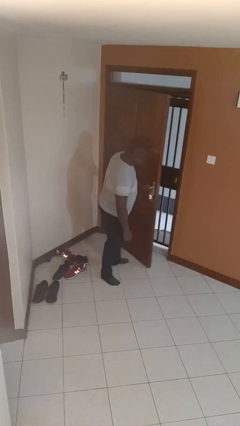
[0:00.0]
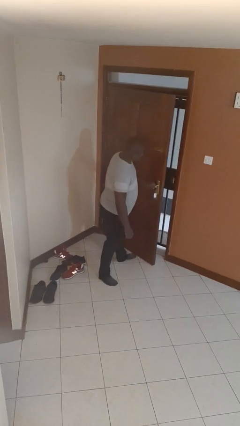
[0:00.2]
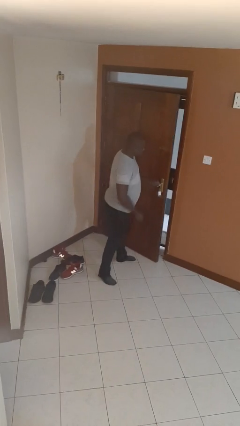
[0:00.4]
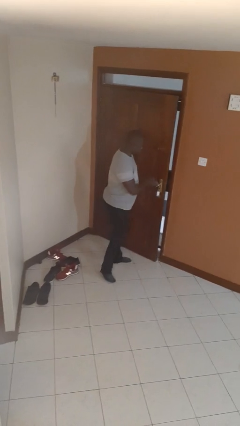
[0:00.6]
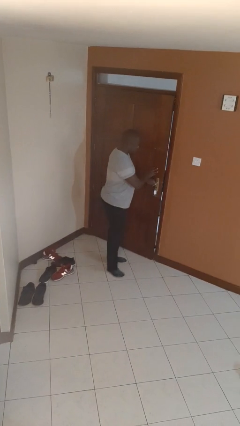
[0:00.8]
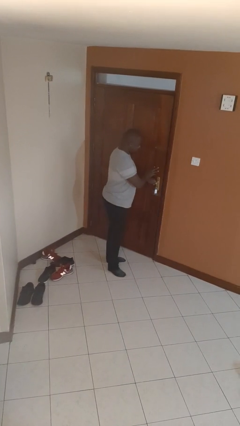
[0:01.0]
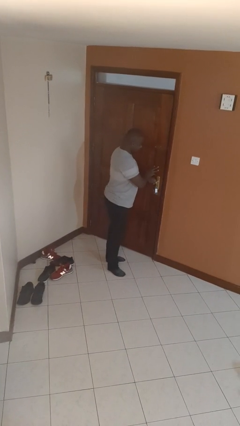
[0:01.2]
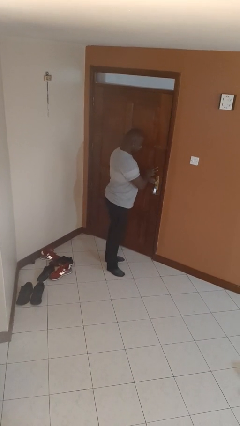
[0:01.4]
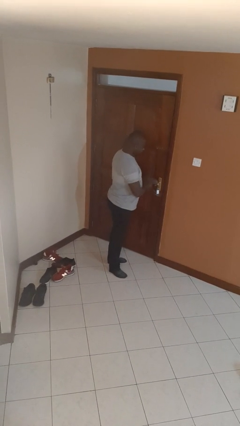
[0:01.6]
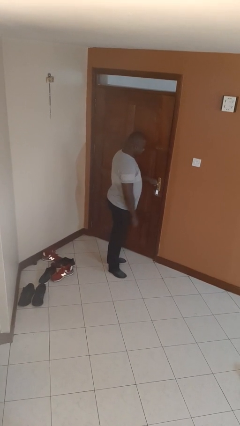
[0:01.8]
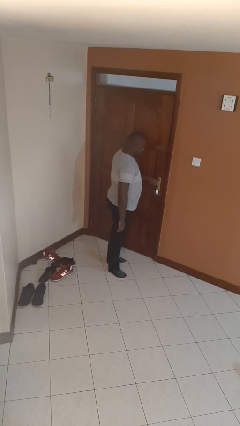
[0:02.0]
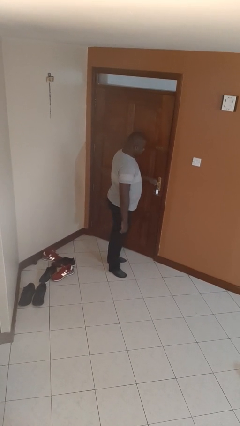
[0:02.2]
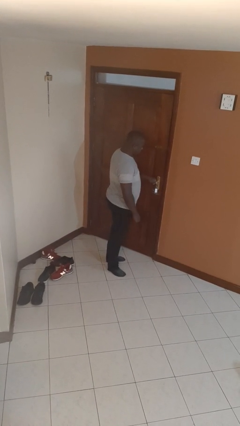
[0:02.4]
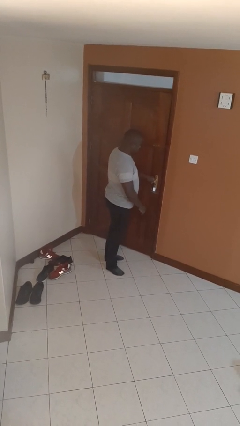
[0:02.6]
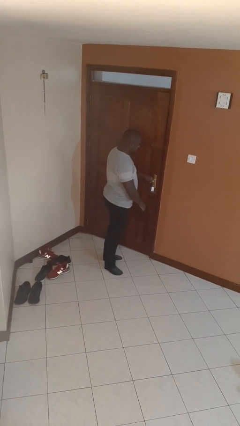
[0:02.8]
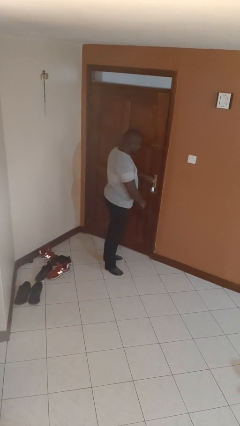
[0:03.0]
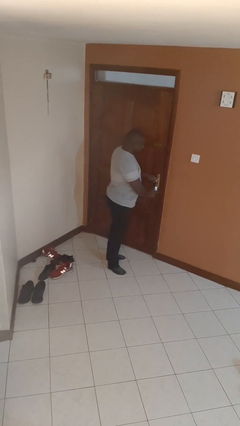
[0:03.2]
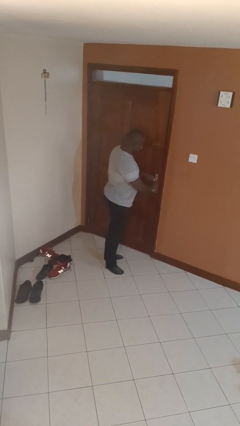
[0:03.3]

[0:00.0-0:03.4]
person closes facility door

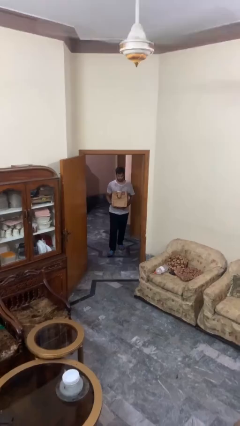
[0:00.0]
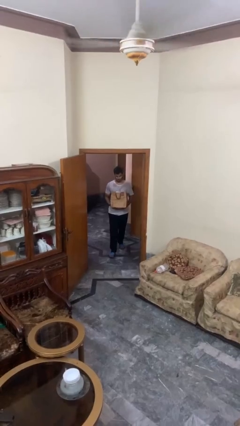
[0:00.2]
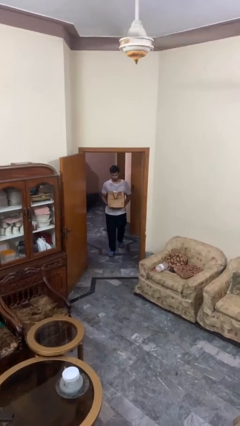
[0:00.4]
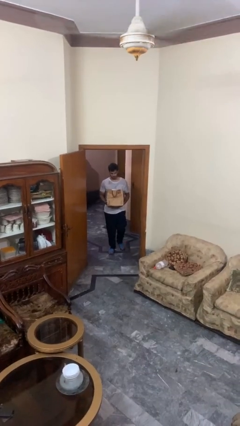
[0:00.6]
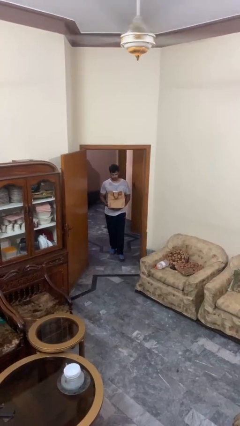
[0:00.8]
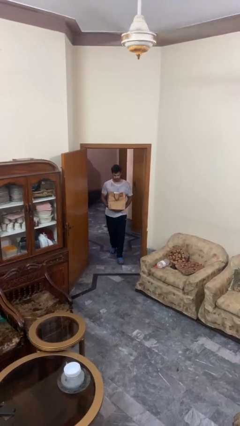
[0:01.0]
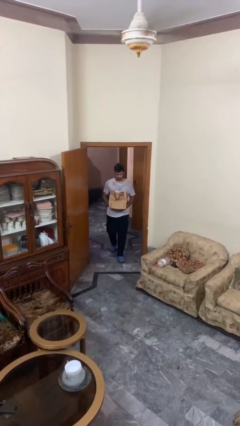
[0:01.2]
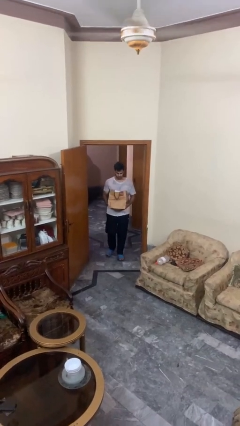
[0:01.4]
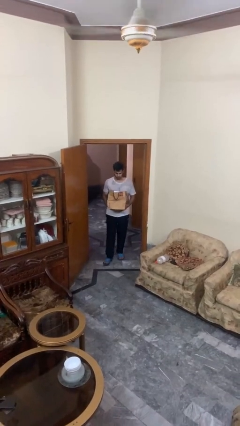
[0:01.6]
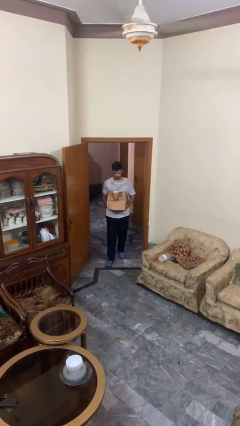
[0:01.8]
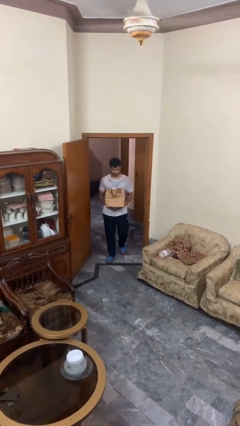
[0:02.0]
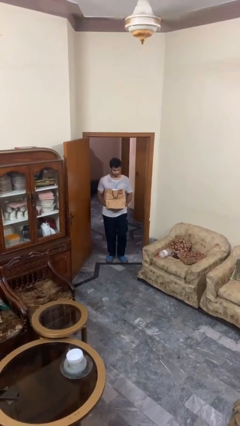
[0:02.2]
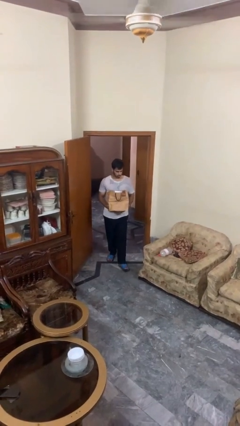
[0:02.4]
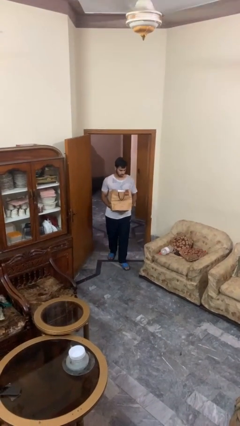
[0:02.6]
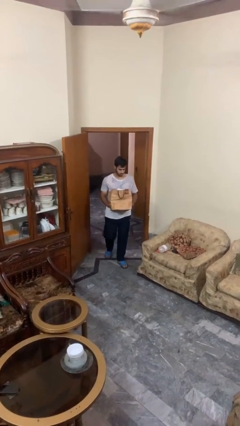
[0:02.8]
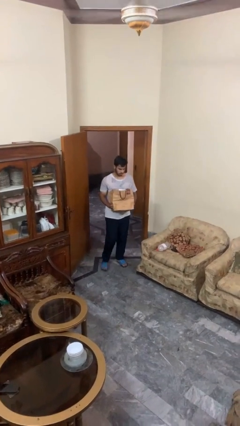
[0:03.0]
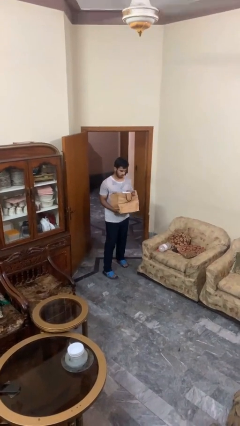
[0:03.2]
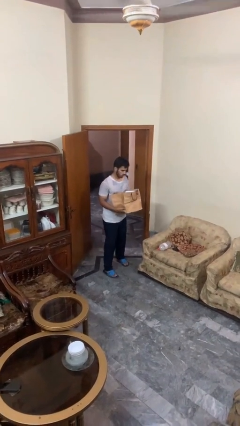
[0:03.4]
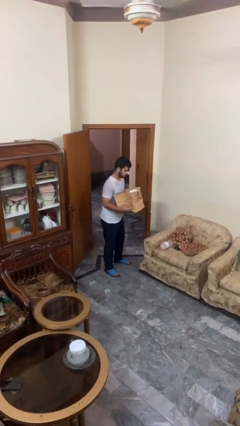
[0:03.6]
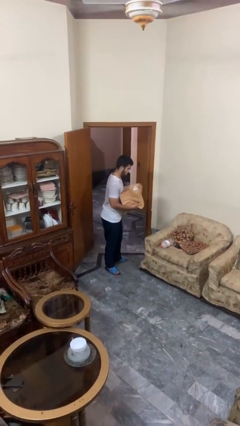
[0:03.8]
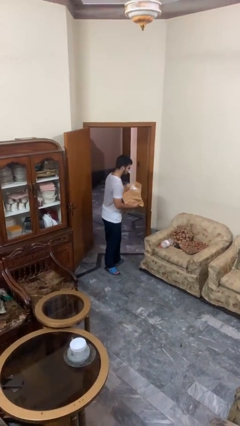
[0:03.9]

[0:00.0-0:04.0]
person carries groceries

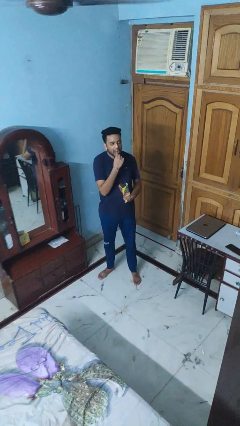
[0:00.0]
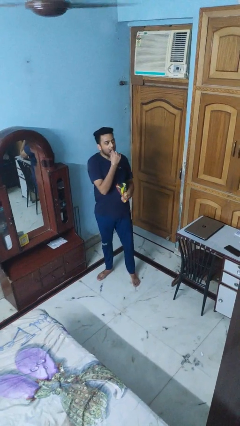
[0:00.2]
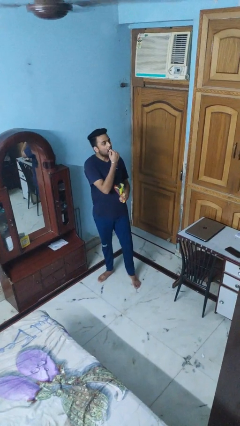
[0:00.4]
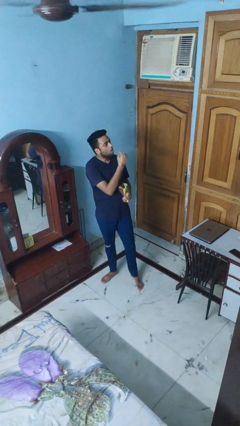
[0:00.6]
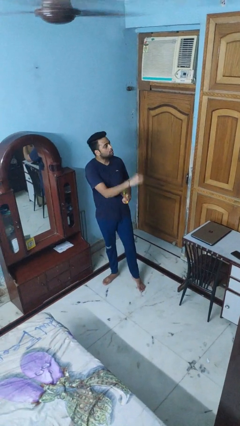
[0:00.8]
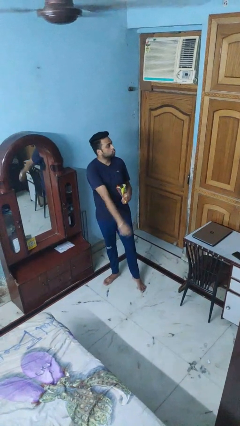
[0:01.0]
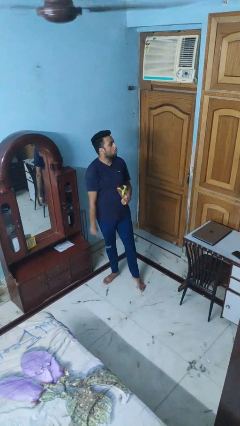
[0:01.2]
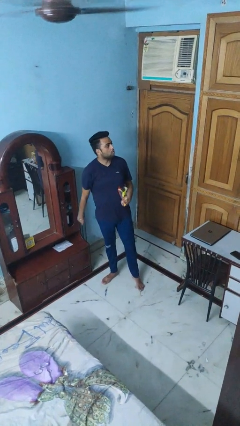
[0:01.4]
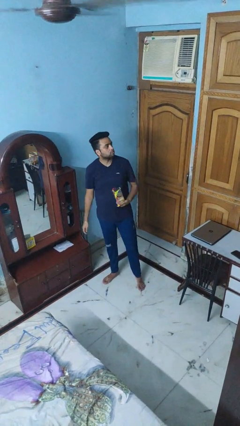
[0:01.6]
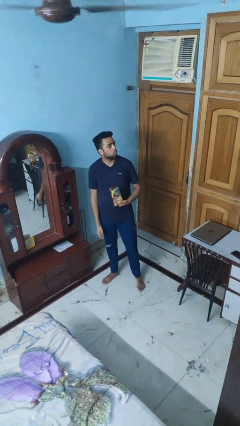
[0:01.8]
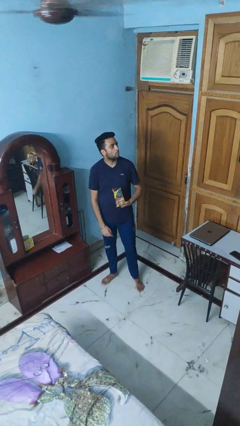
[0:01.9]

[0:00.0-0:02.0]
person eats snack from bag

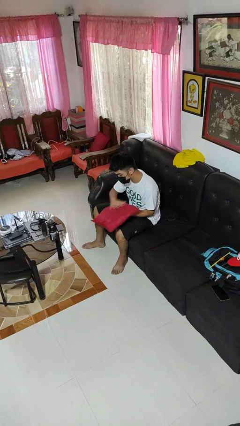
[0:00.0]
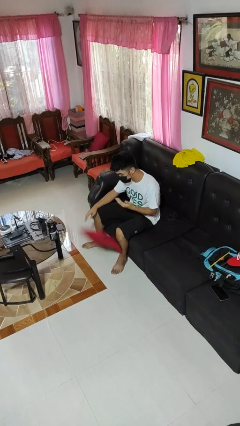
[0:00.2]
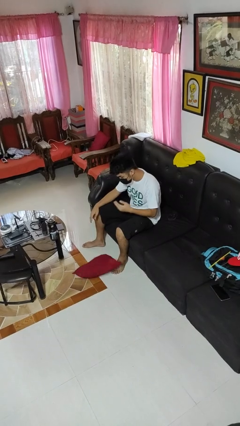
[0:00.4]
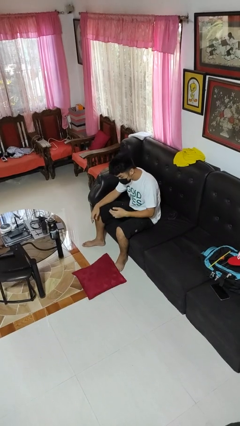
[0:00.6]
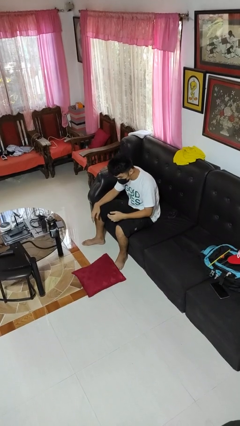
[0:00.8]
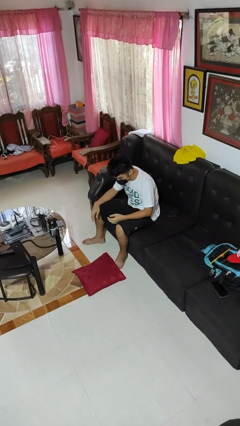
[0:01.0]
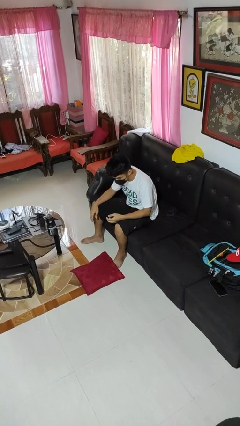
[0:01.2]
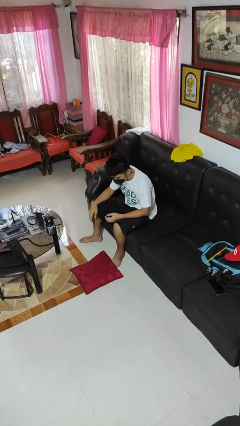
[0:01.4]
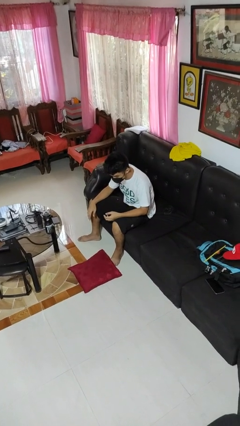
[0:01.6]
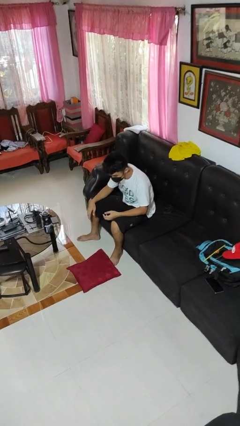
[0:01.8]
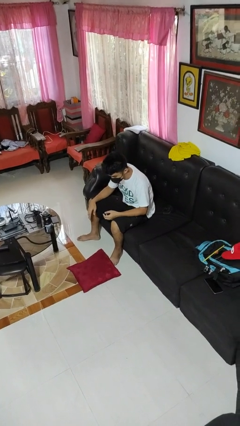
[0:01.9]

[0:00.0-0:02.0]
person drops object

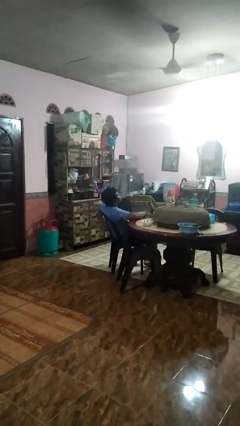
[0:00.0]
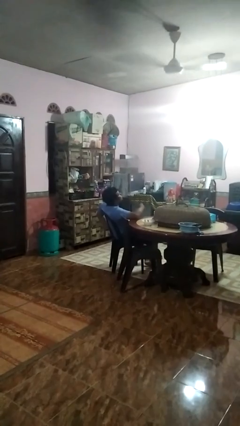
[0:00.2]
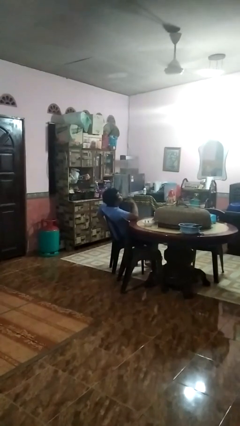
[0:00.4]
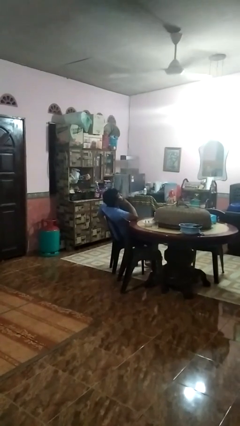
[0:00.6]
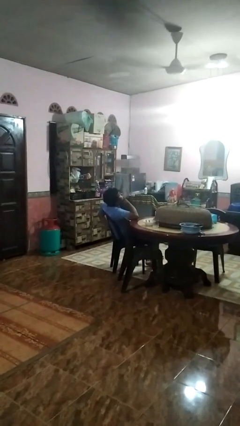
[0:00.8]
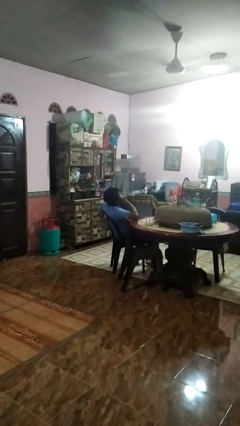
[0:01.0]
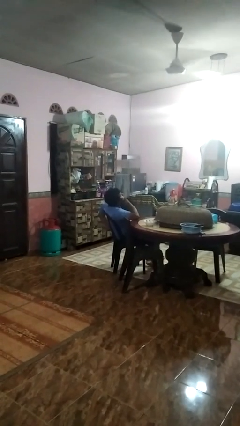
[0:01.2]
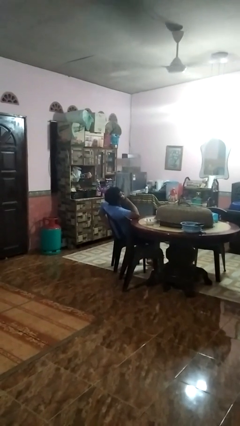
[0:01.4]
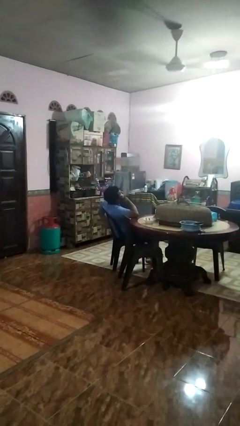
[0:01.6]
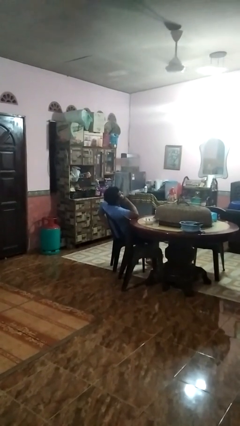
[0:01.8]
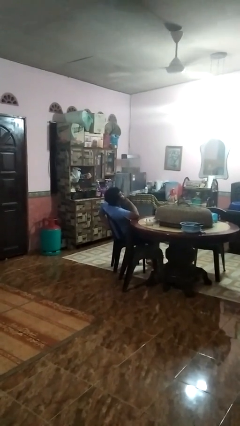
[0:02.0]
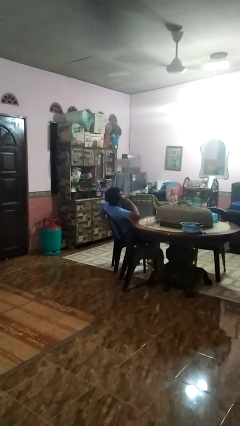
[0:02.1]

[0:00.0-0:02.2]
person strokes chin

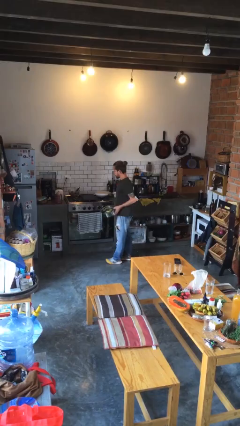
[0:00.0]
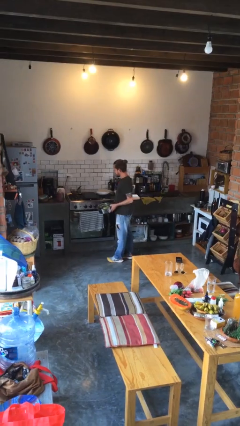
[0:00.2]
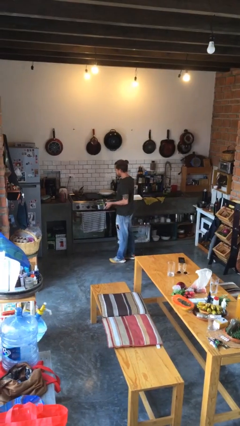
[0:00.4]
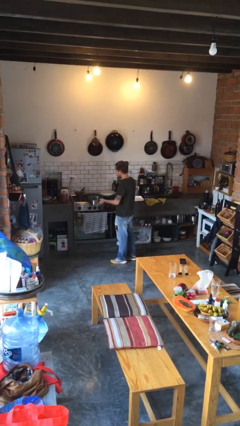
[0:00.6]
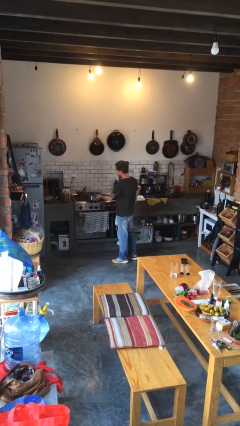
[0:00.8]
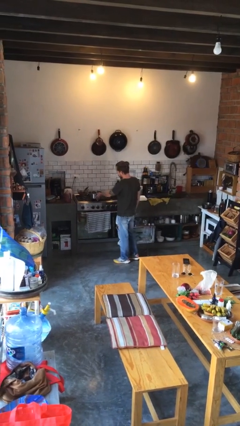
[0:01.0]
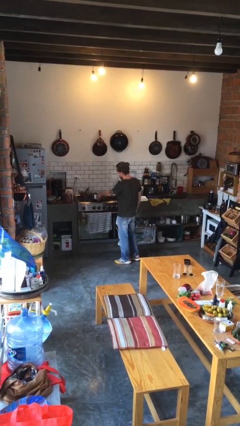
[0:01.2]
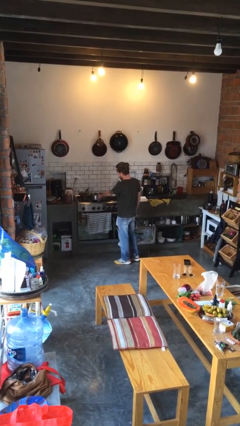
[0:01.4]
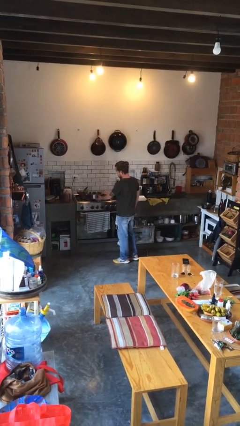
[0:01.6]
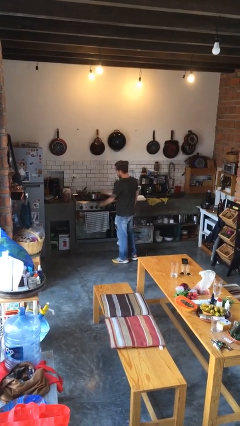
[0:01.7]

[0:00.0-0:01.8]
person puts down object on countertop

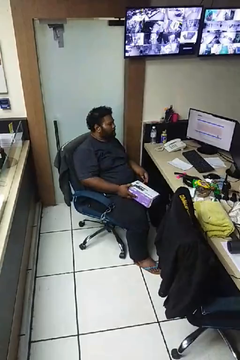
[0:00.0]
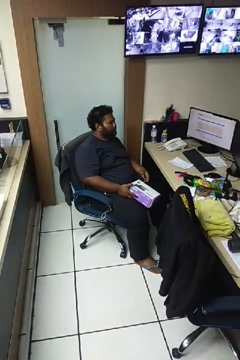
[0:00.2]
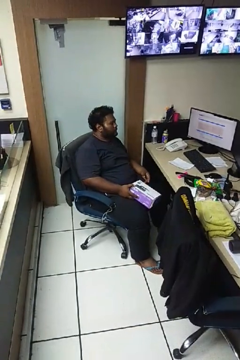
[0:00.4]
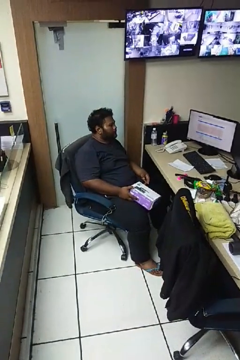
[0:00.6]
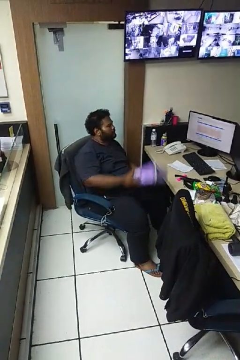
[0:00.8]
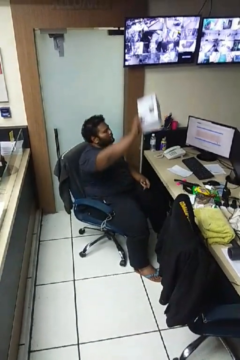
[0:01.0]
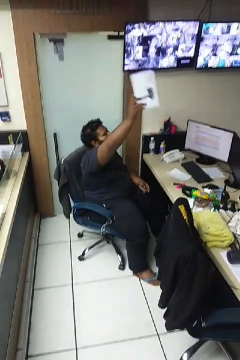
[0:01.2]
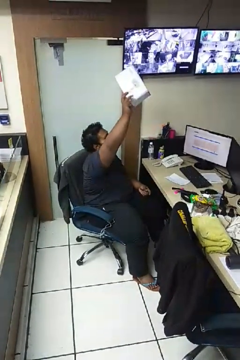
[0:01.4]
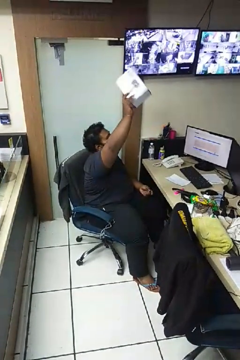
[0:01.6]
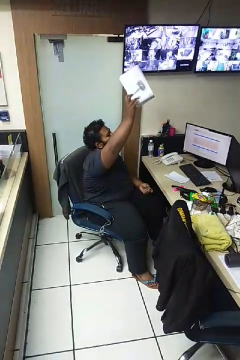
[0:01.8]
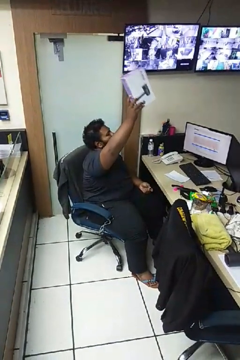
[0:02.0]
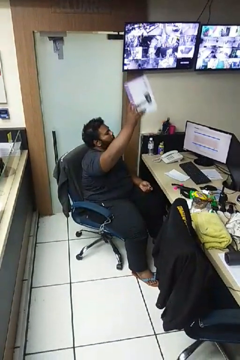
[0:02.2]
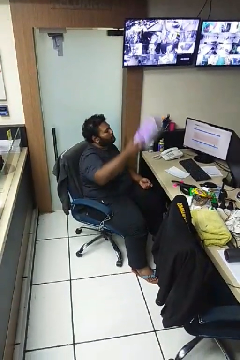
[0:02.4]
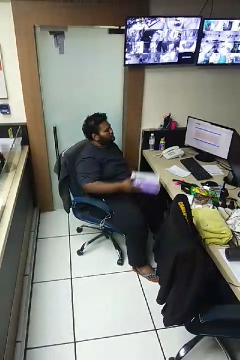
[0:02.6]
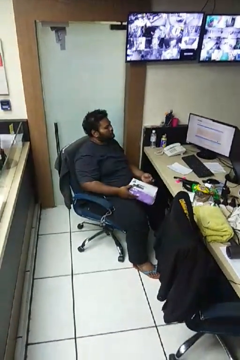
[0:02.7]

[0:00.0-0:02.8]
person holds object above head
